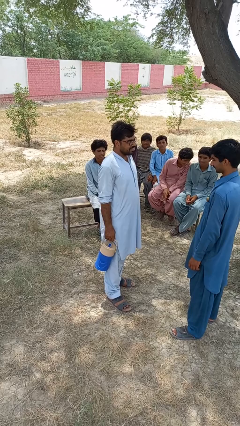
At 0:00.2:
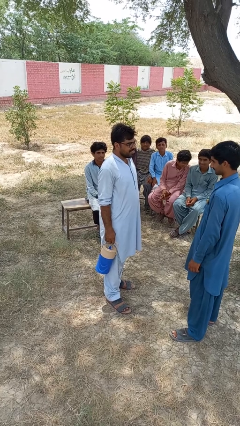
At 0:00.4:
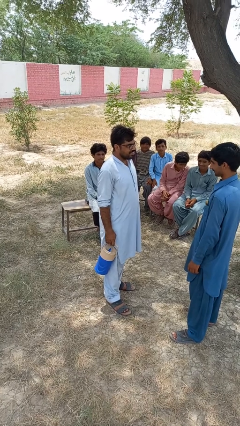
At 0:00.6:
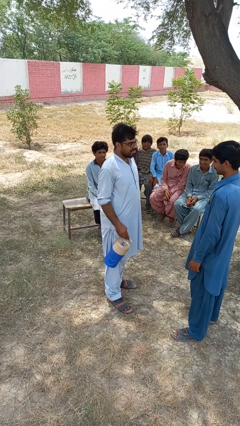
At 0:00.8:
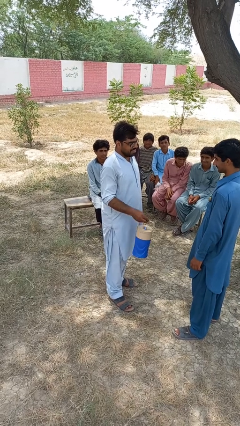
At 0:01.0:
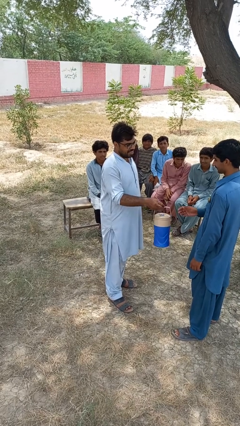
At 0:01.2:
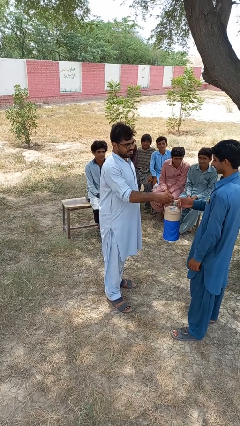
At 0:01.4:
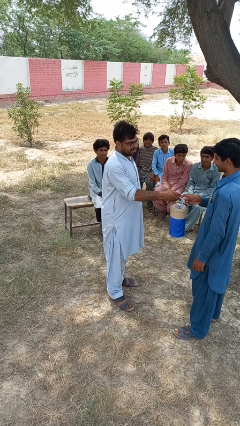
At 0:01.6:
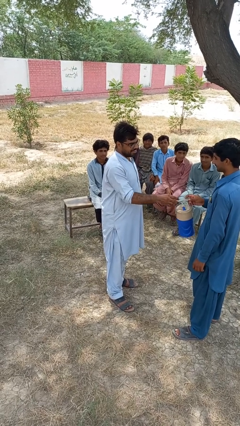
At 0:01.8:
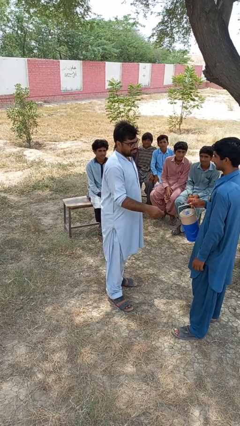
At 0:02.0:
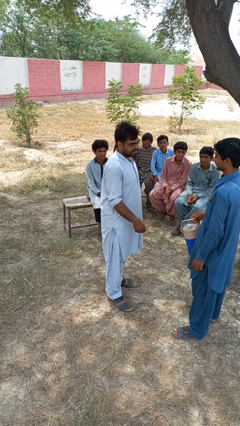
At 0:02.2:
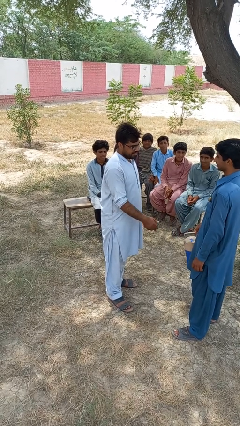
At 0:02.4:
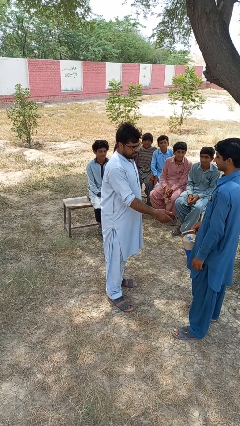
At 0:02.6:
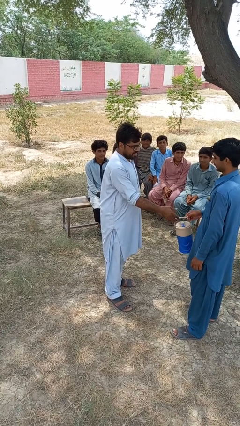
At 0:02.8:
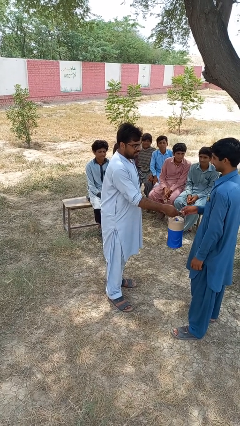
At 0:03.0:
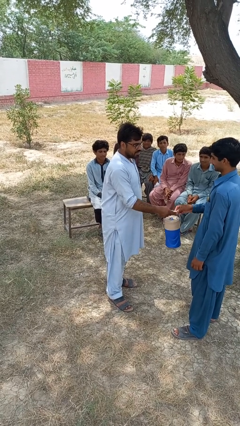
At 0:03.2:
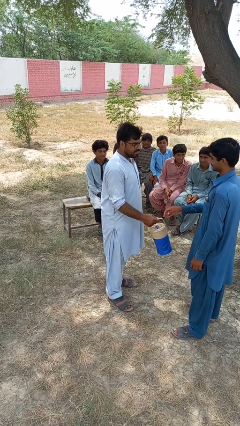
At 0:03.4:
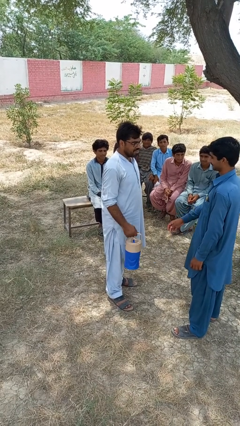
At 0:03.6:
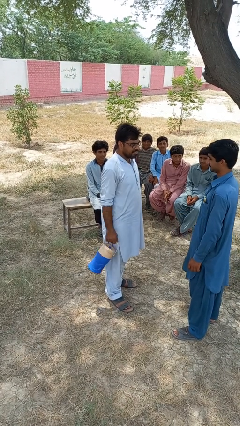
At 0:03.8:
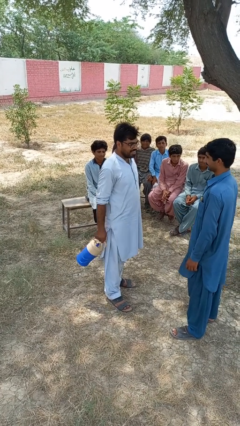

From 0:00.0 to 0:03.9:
person transfers object to person

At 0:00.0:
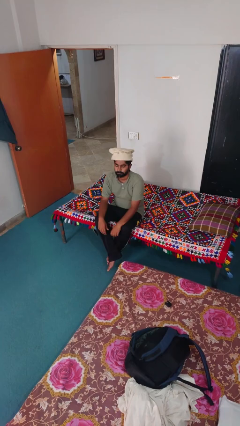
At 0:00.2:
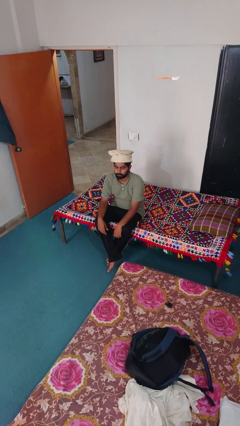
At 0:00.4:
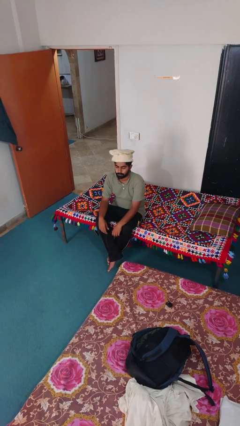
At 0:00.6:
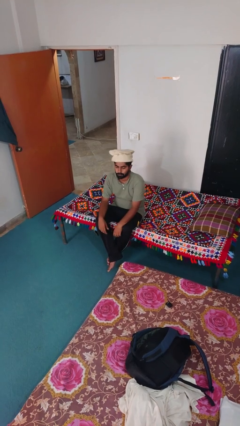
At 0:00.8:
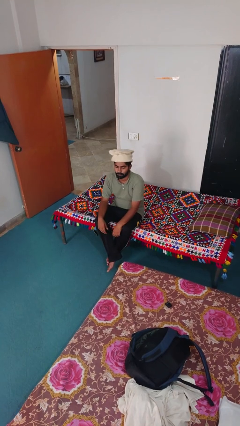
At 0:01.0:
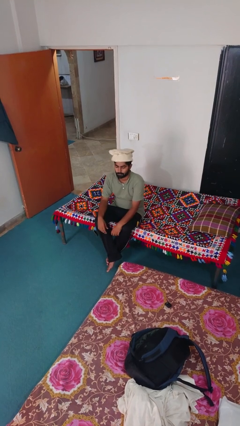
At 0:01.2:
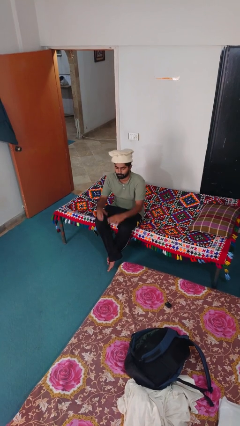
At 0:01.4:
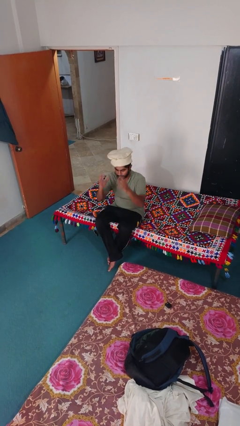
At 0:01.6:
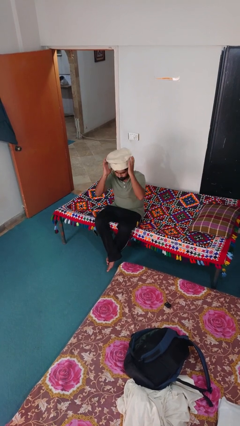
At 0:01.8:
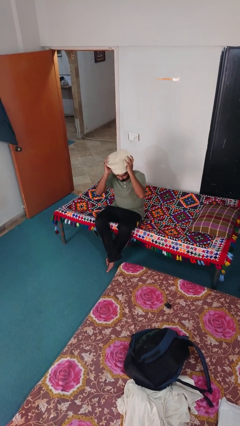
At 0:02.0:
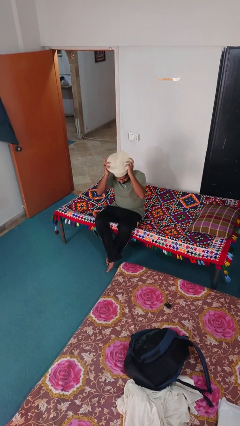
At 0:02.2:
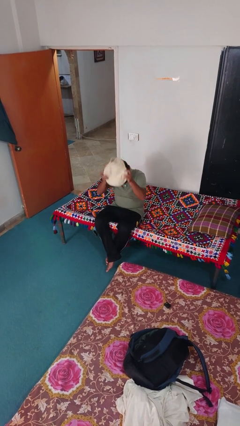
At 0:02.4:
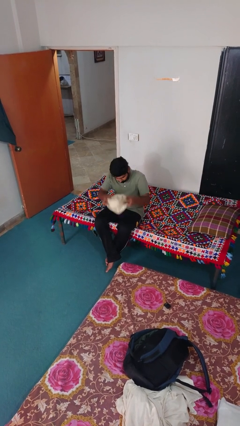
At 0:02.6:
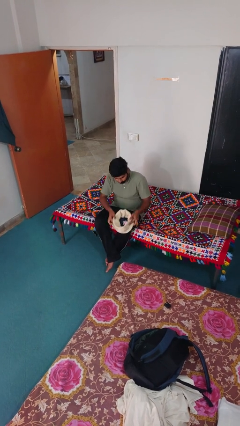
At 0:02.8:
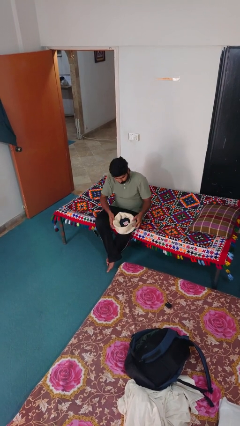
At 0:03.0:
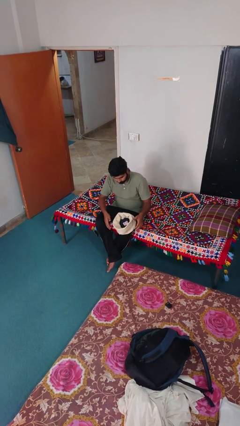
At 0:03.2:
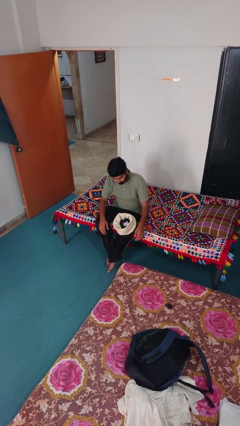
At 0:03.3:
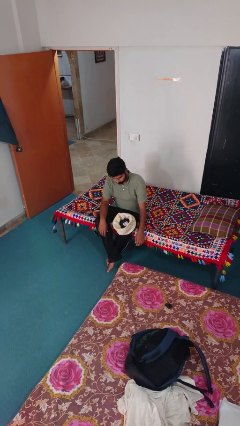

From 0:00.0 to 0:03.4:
person takes off hat

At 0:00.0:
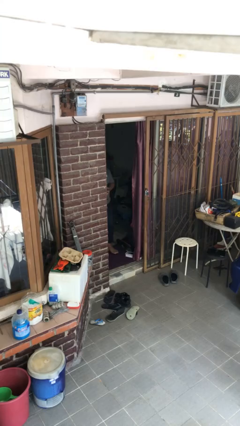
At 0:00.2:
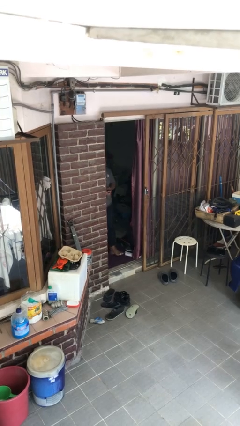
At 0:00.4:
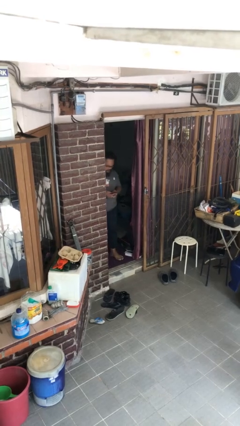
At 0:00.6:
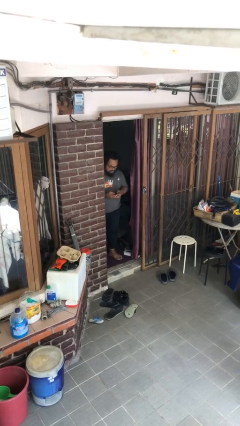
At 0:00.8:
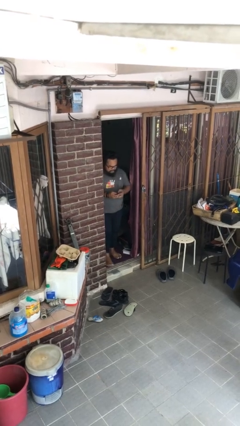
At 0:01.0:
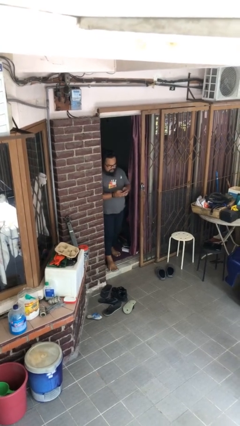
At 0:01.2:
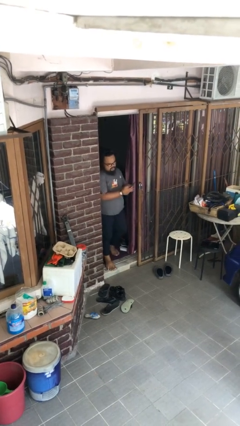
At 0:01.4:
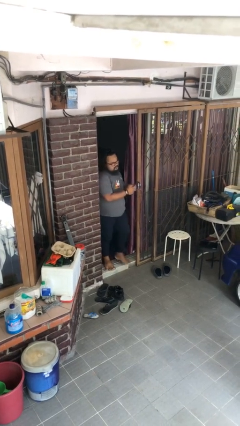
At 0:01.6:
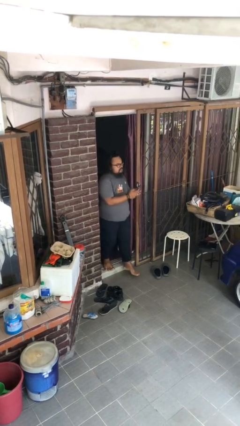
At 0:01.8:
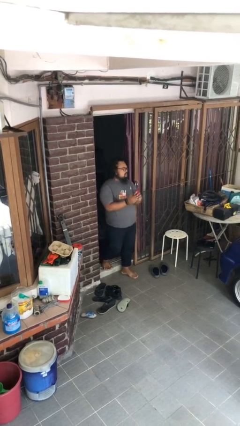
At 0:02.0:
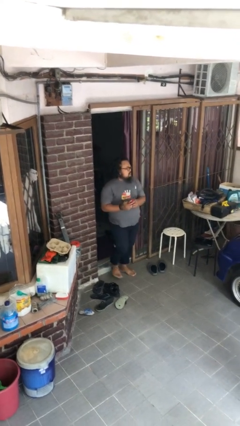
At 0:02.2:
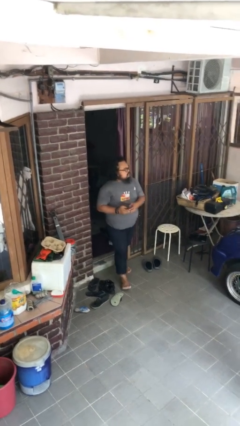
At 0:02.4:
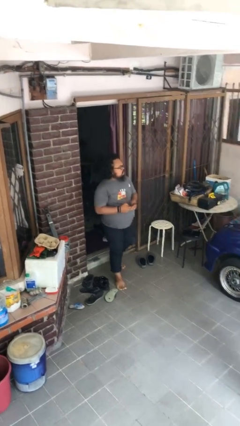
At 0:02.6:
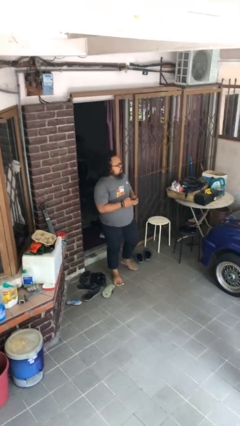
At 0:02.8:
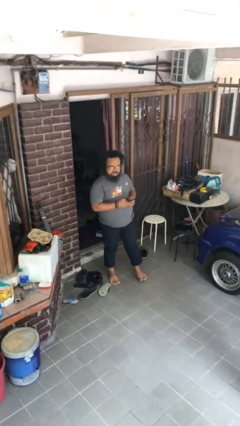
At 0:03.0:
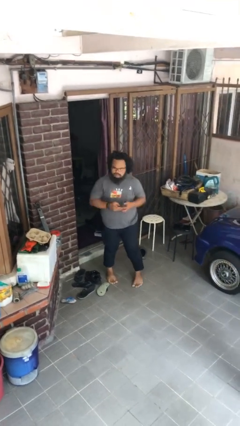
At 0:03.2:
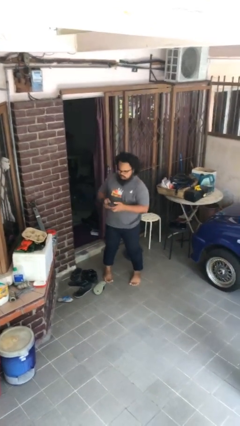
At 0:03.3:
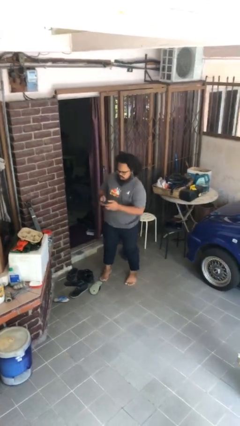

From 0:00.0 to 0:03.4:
person enters scene through structure

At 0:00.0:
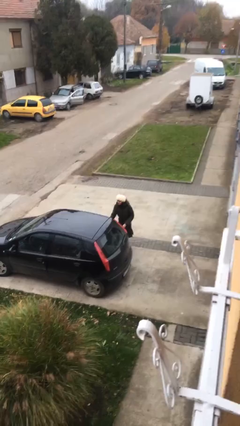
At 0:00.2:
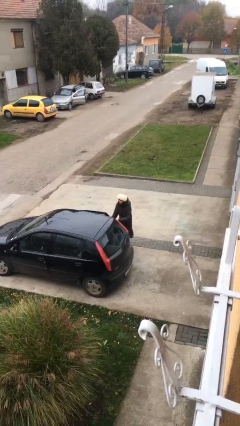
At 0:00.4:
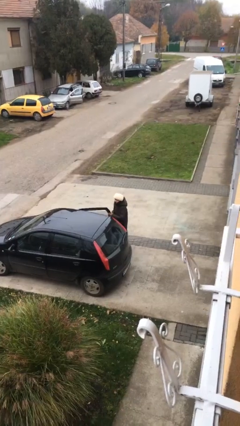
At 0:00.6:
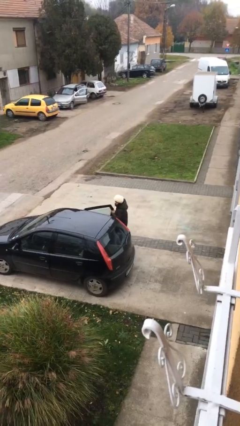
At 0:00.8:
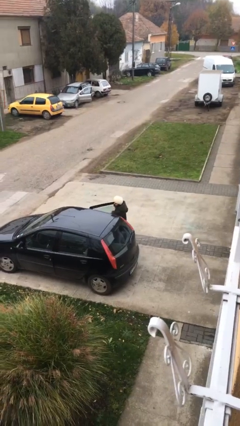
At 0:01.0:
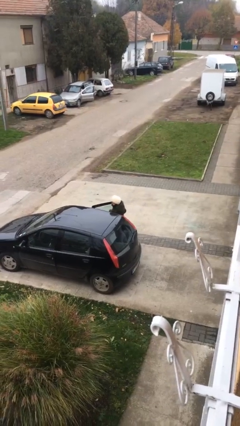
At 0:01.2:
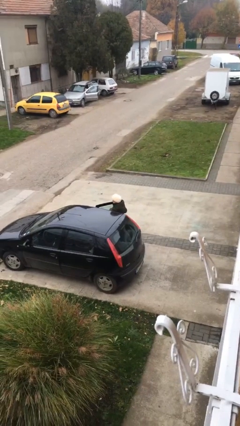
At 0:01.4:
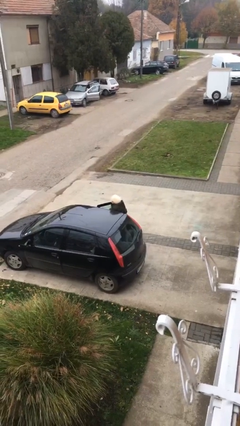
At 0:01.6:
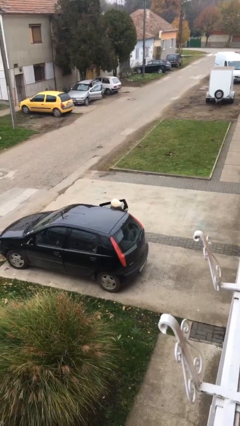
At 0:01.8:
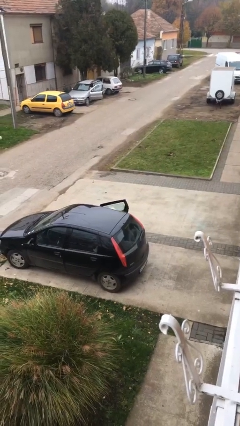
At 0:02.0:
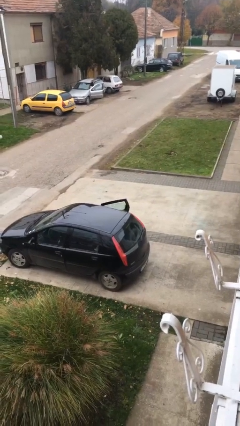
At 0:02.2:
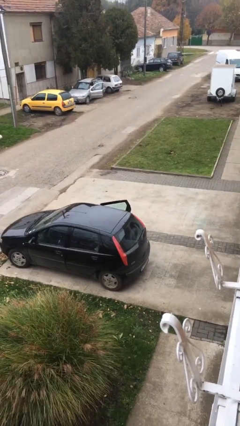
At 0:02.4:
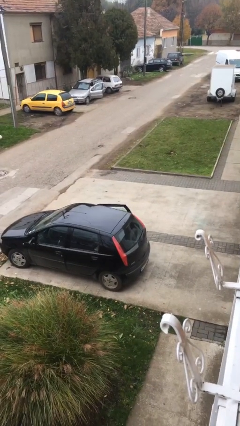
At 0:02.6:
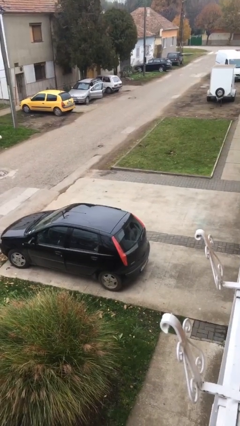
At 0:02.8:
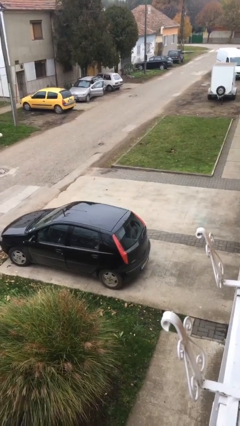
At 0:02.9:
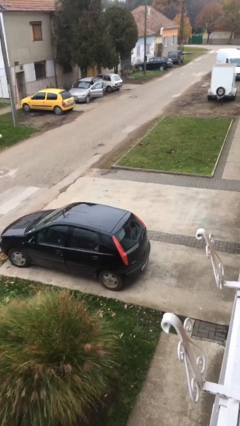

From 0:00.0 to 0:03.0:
person enters car

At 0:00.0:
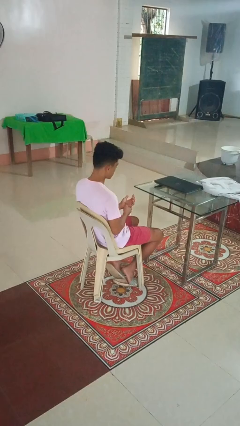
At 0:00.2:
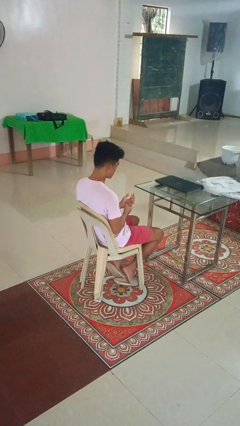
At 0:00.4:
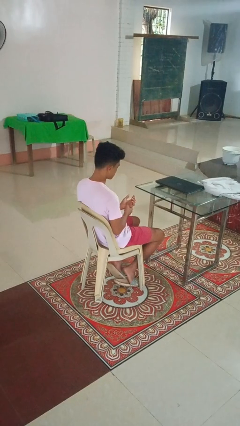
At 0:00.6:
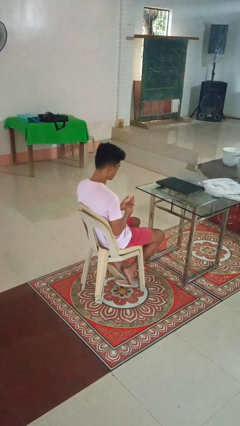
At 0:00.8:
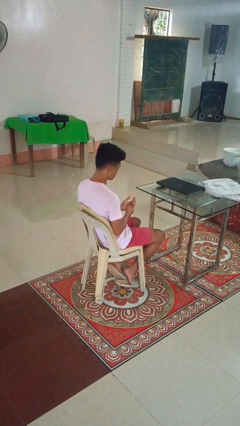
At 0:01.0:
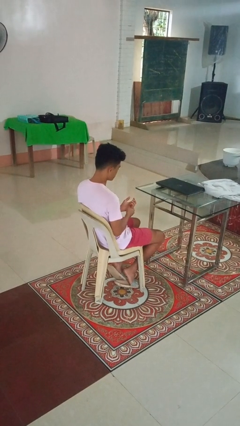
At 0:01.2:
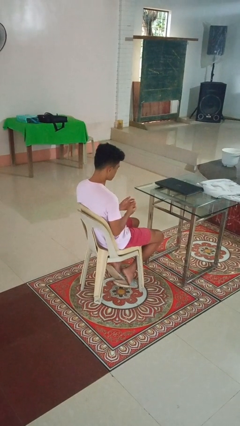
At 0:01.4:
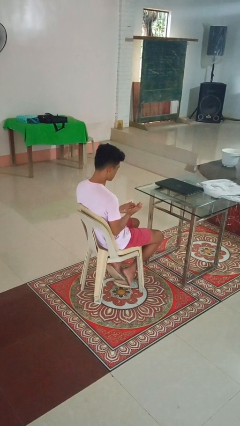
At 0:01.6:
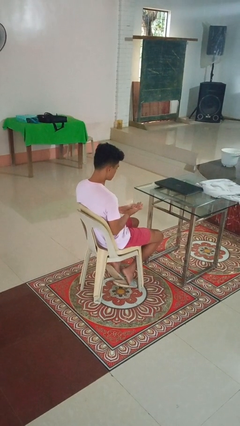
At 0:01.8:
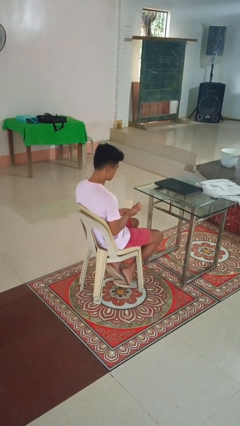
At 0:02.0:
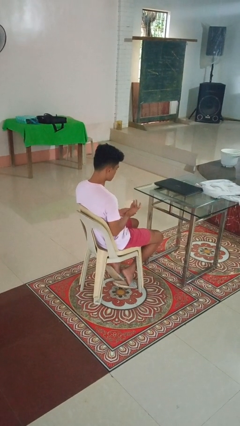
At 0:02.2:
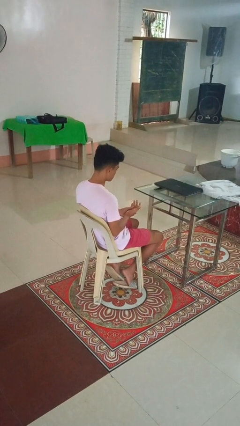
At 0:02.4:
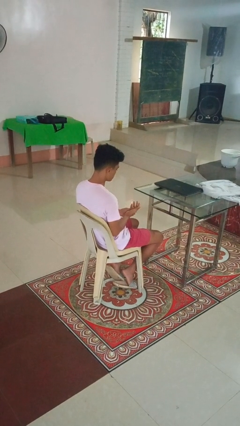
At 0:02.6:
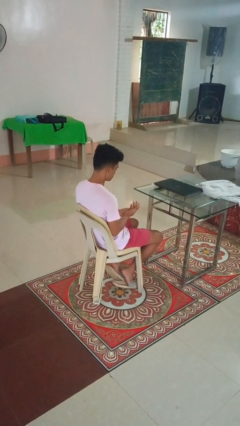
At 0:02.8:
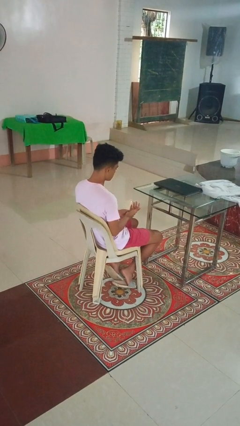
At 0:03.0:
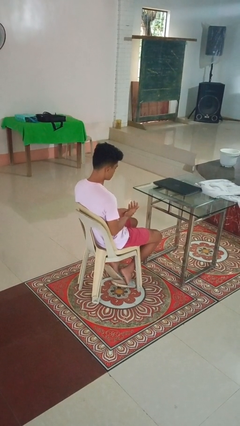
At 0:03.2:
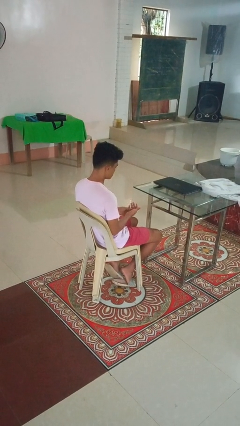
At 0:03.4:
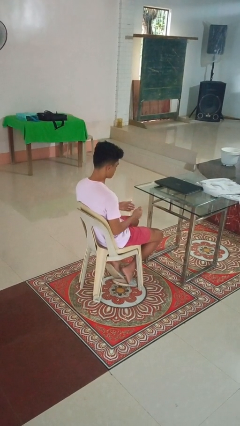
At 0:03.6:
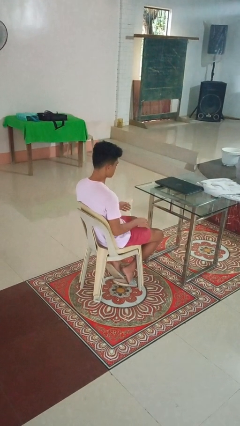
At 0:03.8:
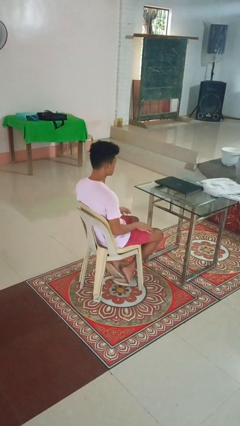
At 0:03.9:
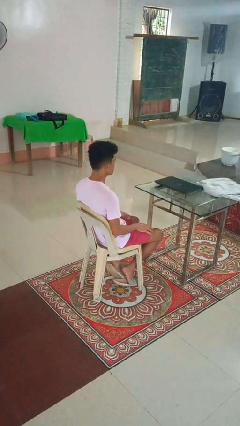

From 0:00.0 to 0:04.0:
person looks at hands in lap
